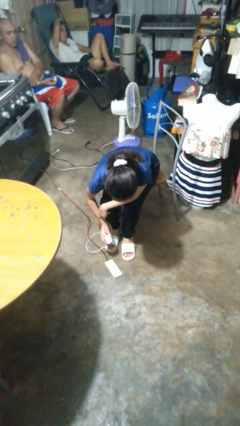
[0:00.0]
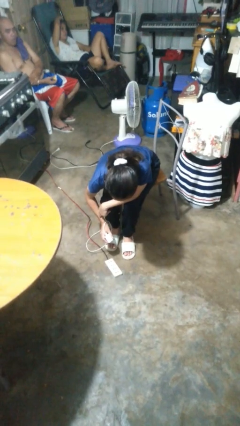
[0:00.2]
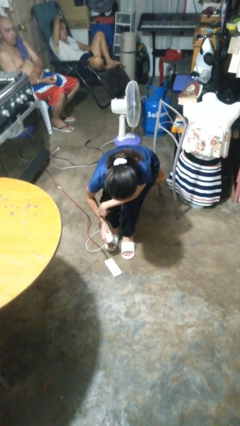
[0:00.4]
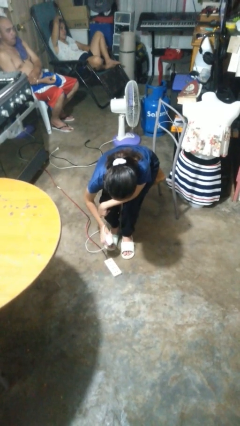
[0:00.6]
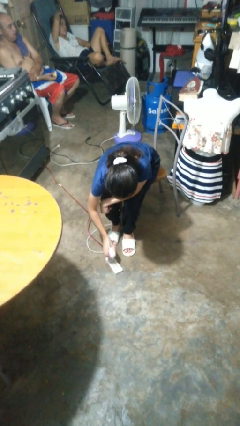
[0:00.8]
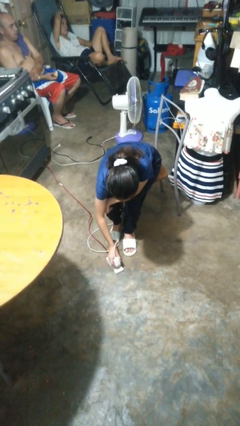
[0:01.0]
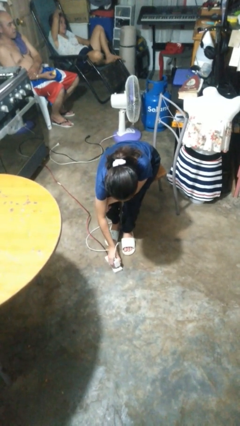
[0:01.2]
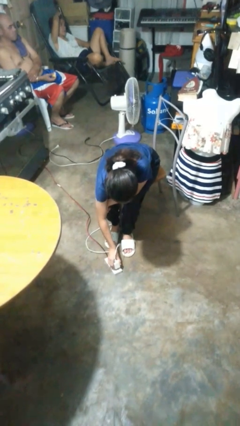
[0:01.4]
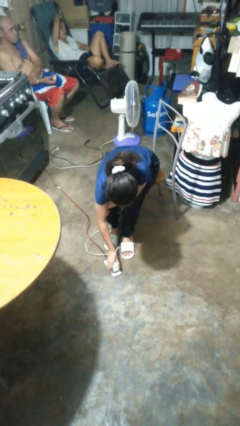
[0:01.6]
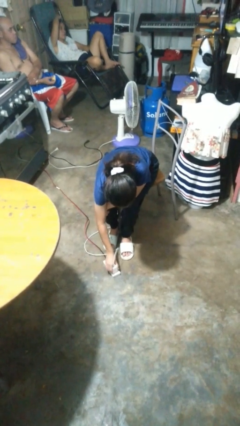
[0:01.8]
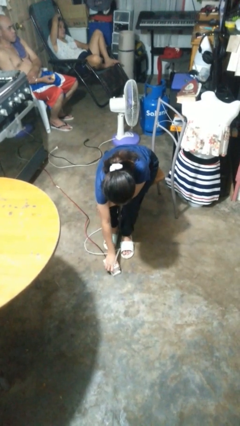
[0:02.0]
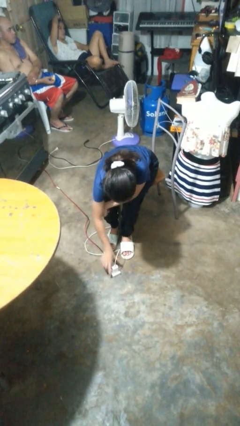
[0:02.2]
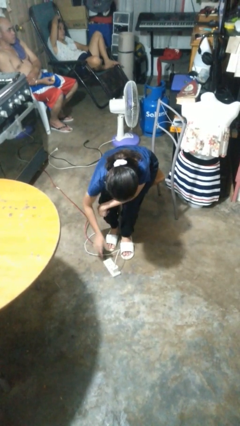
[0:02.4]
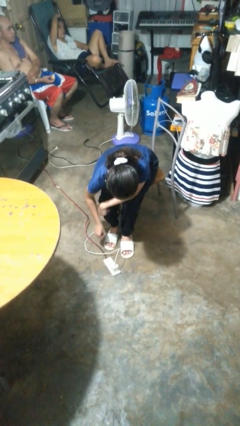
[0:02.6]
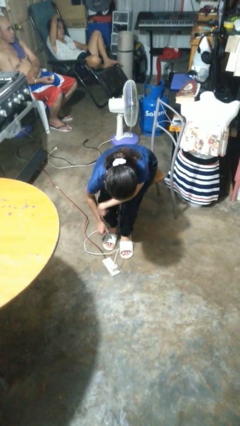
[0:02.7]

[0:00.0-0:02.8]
person plugs into electrical socket

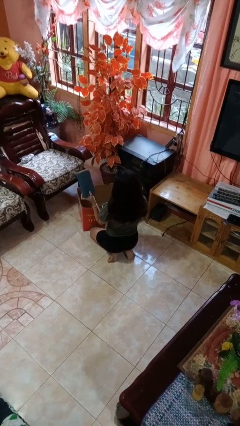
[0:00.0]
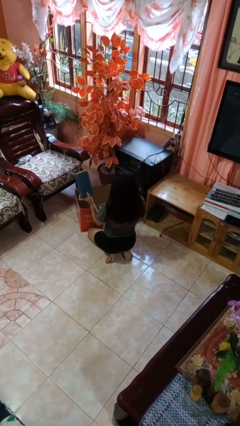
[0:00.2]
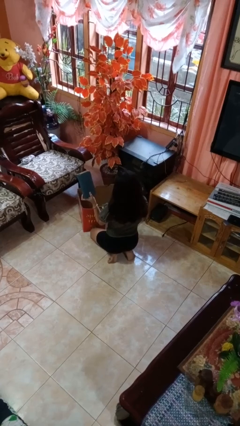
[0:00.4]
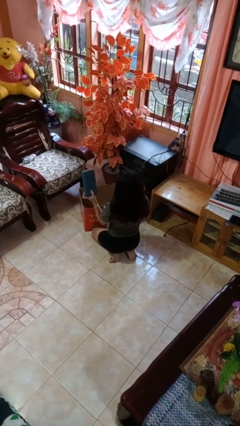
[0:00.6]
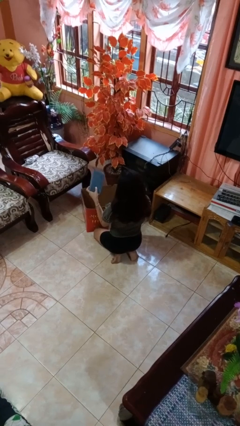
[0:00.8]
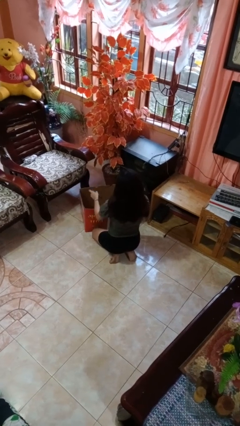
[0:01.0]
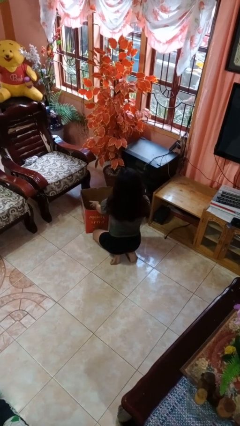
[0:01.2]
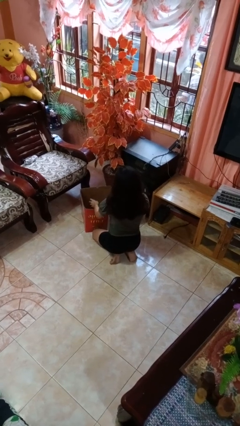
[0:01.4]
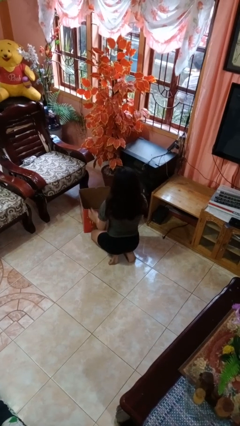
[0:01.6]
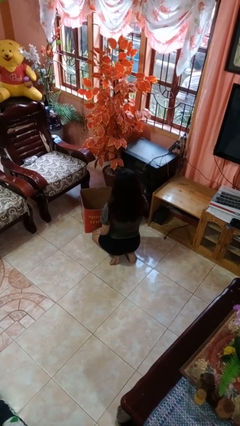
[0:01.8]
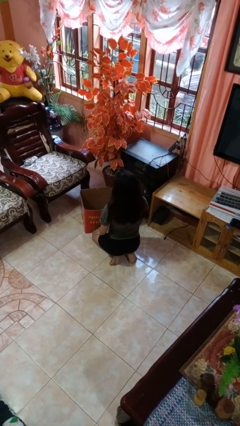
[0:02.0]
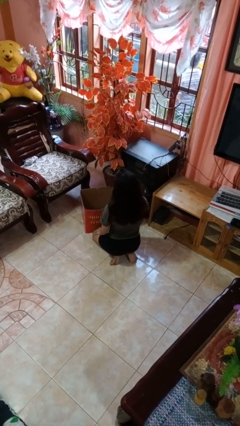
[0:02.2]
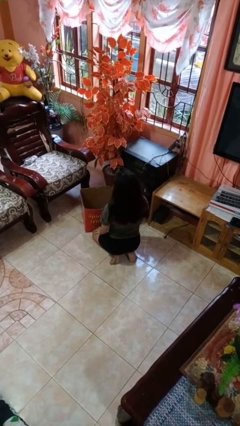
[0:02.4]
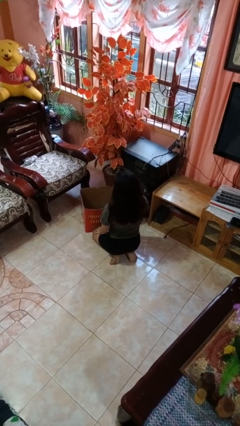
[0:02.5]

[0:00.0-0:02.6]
person puts object into box

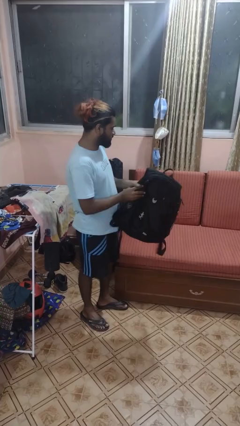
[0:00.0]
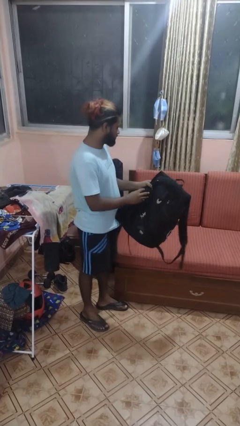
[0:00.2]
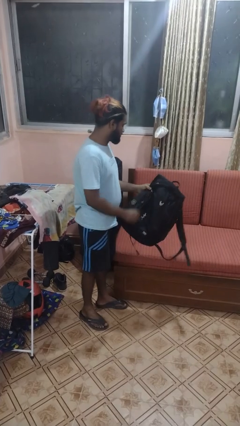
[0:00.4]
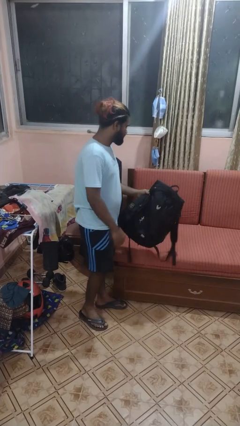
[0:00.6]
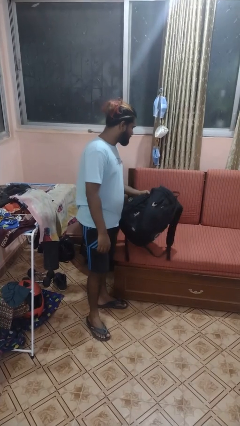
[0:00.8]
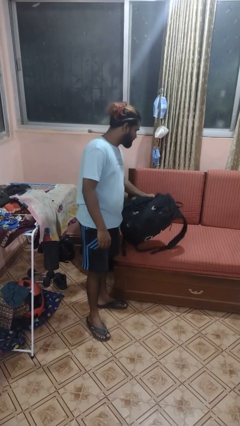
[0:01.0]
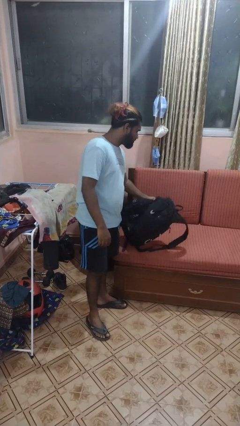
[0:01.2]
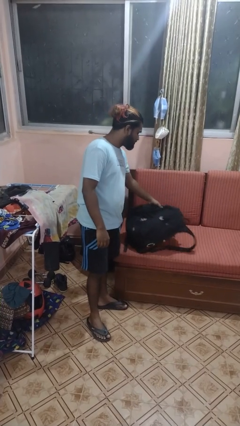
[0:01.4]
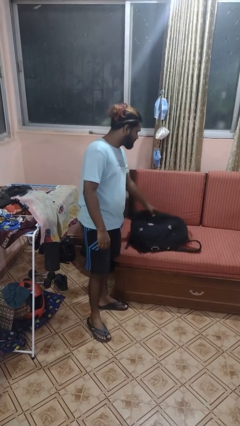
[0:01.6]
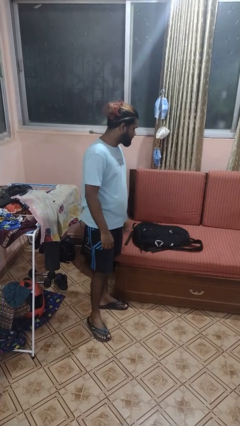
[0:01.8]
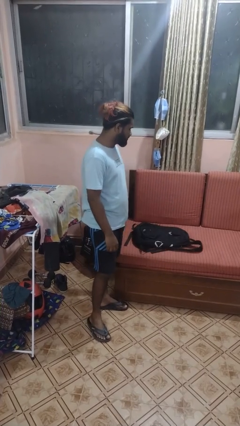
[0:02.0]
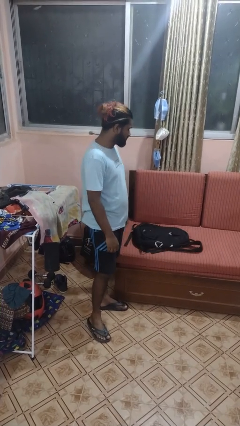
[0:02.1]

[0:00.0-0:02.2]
person puts down object on couch

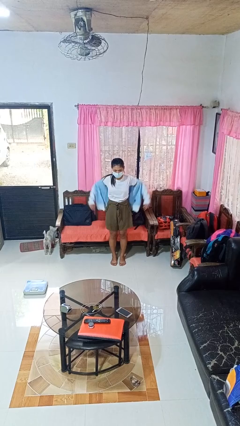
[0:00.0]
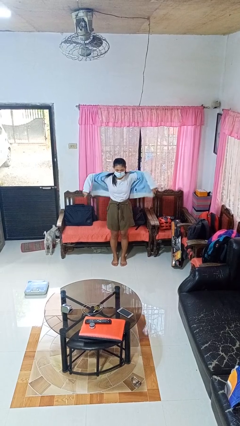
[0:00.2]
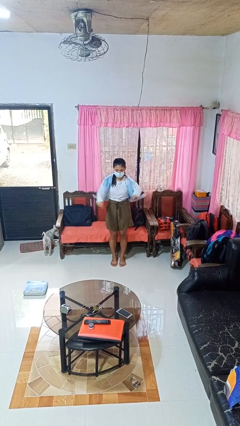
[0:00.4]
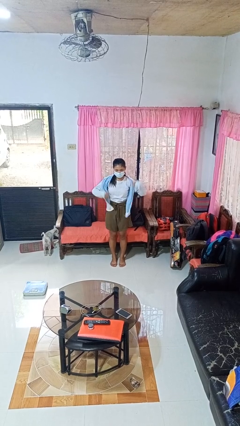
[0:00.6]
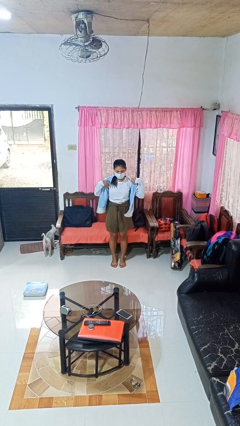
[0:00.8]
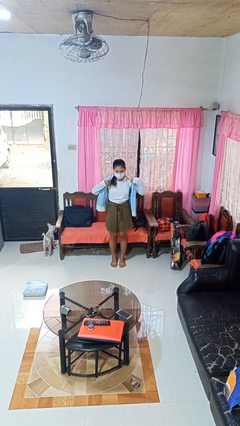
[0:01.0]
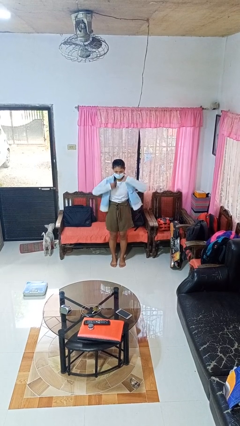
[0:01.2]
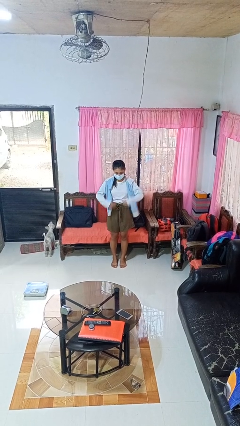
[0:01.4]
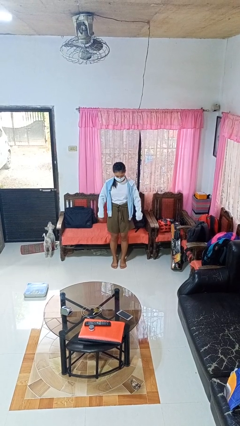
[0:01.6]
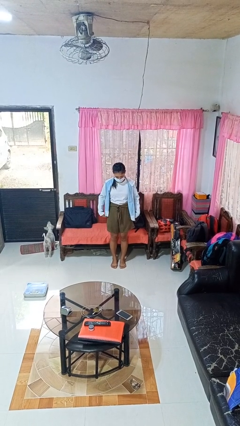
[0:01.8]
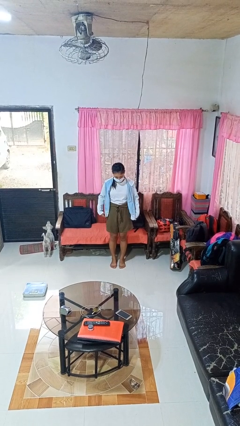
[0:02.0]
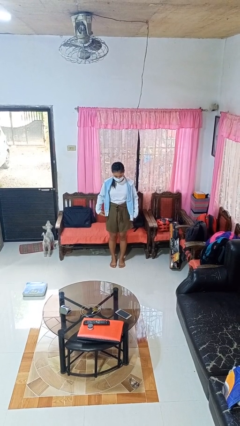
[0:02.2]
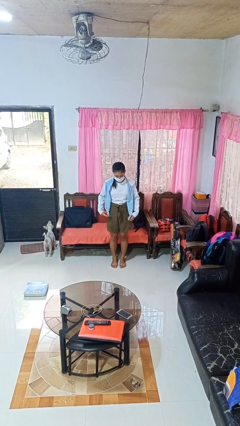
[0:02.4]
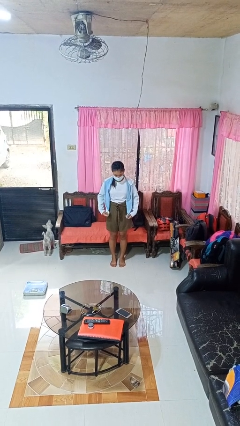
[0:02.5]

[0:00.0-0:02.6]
person puts on jacket

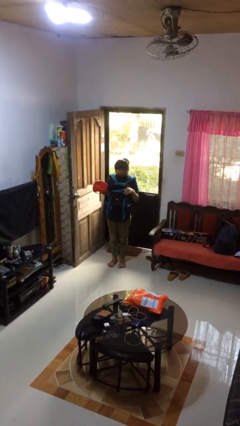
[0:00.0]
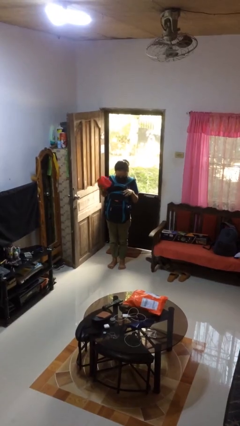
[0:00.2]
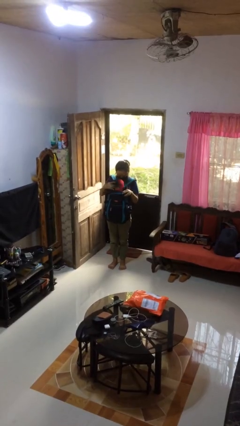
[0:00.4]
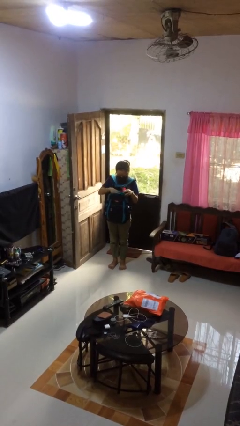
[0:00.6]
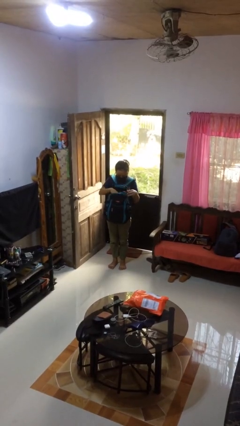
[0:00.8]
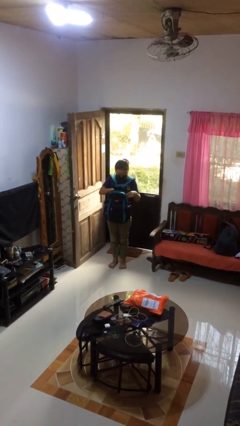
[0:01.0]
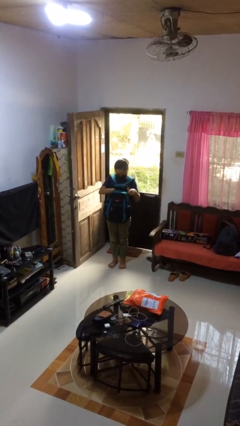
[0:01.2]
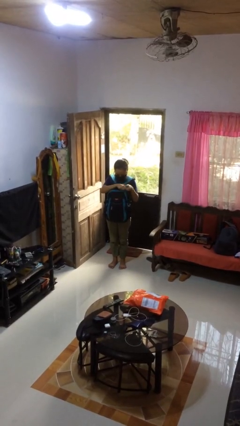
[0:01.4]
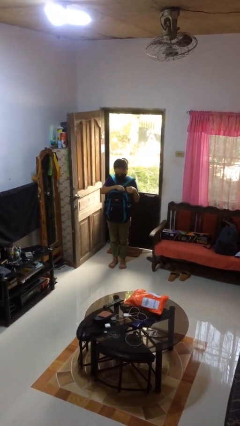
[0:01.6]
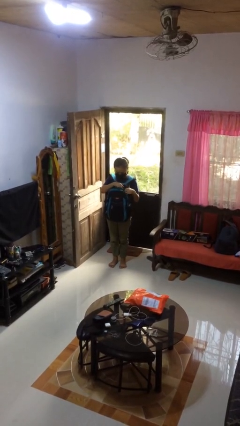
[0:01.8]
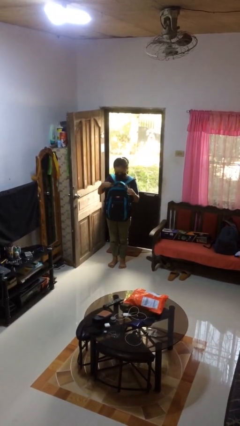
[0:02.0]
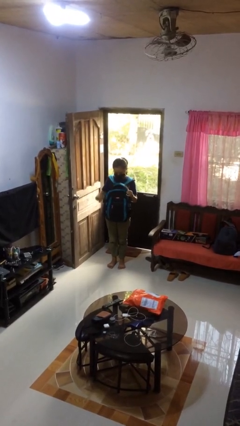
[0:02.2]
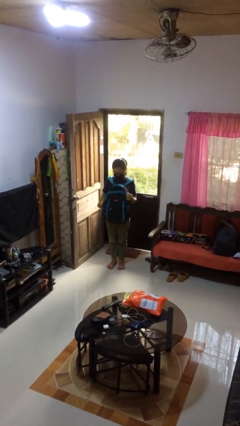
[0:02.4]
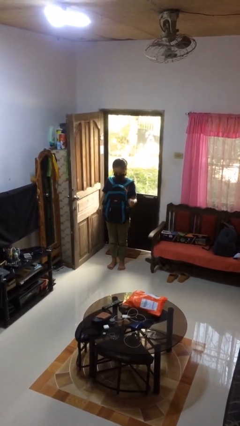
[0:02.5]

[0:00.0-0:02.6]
person puts object into backpack

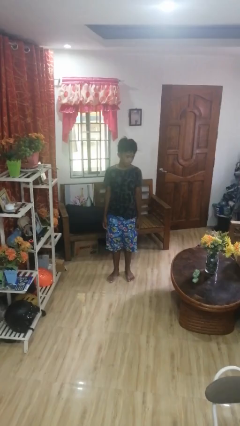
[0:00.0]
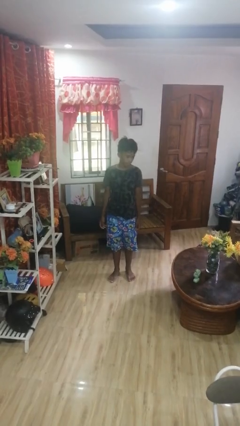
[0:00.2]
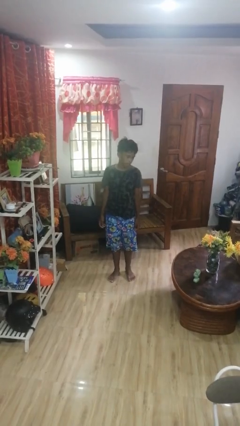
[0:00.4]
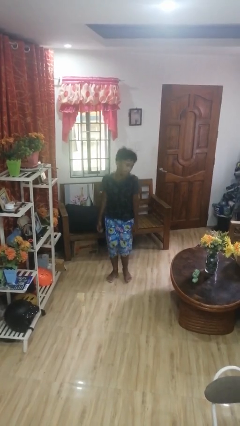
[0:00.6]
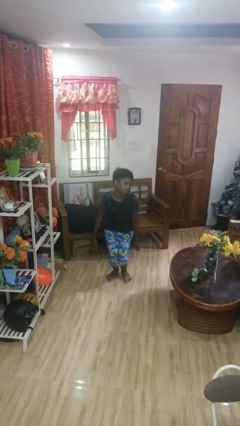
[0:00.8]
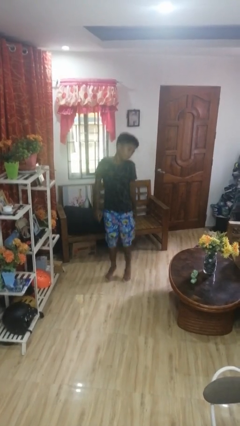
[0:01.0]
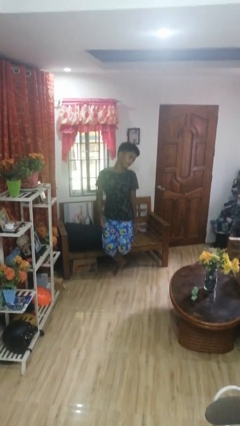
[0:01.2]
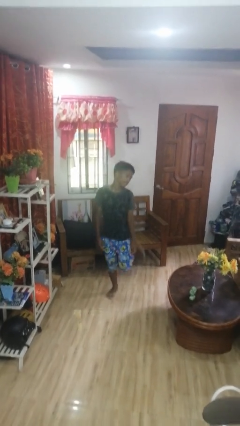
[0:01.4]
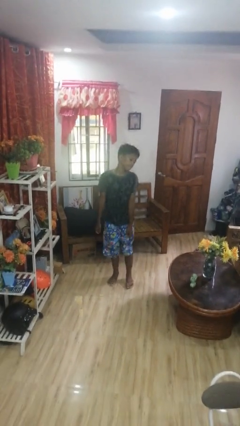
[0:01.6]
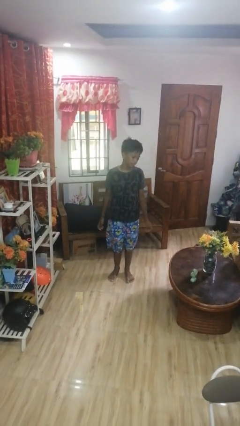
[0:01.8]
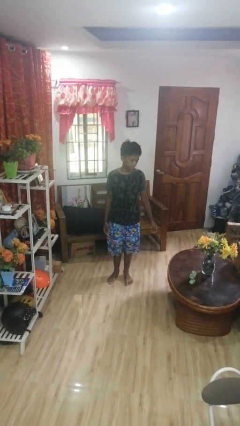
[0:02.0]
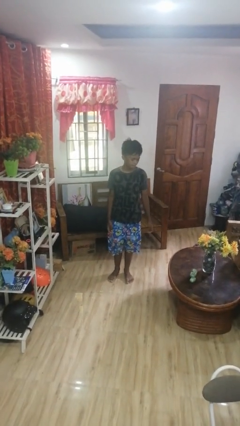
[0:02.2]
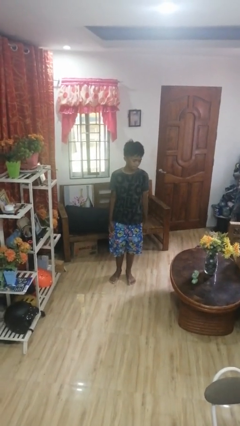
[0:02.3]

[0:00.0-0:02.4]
person jumps

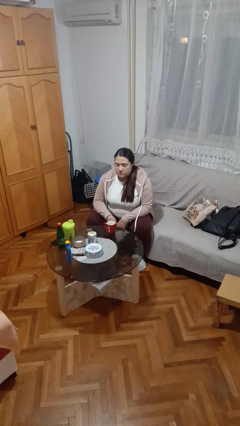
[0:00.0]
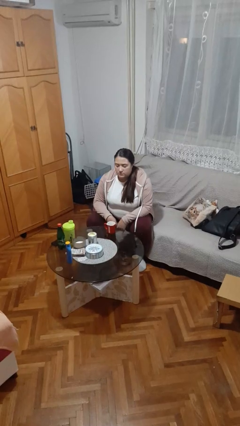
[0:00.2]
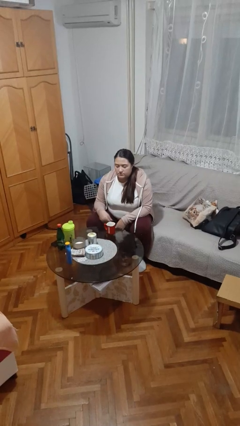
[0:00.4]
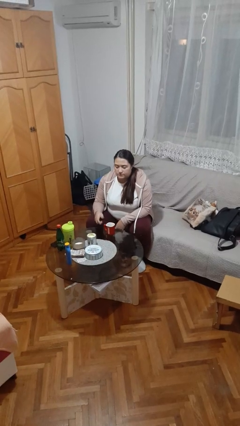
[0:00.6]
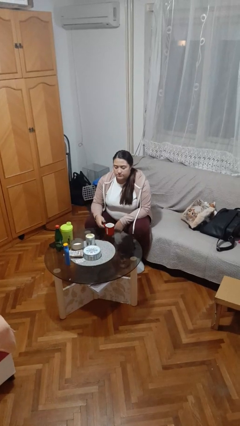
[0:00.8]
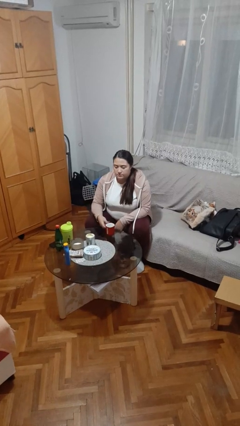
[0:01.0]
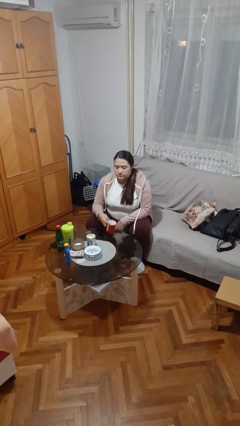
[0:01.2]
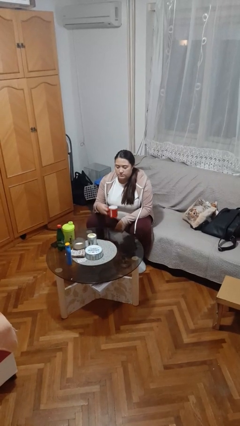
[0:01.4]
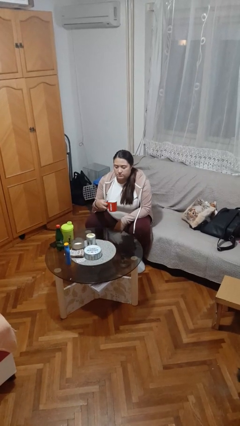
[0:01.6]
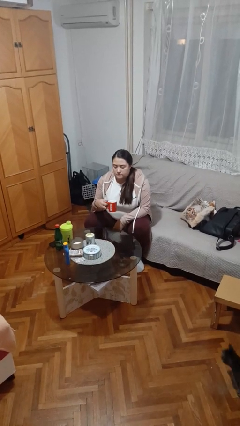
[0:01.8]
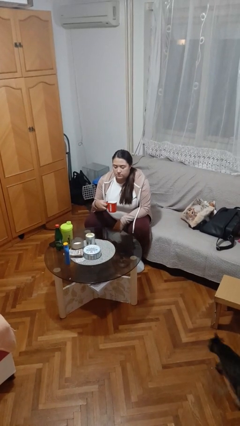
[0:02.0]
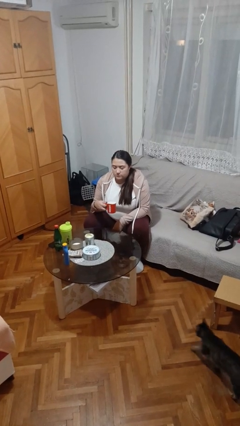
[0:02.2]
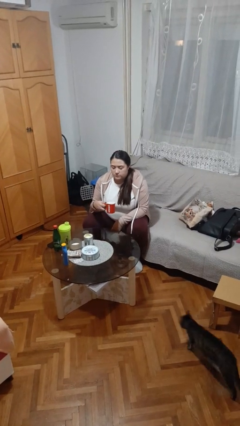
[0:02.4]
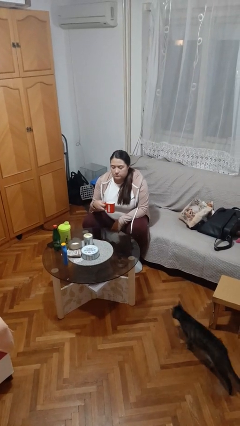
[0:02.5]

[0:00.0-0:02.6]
person picks up object from table
